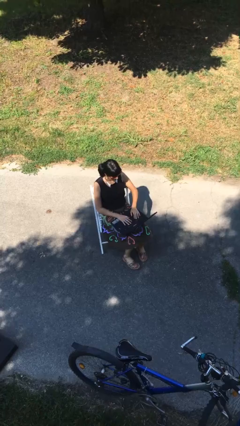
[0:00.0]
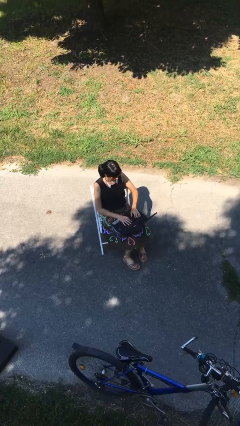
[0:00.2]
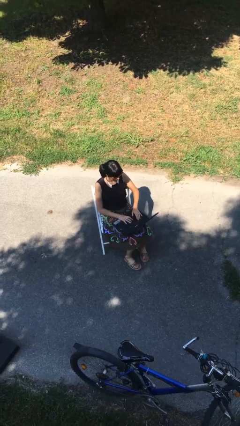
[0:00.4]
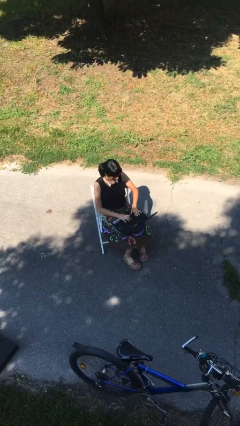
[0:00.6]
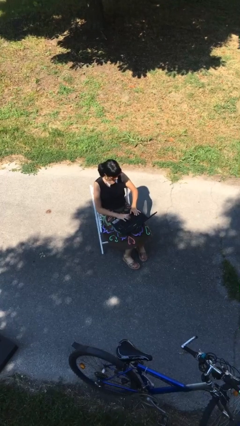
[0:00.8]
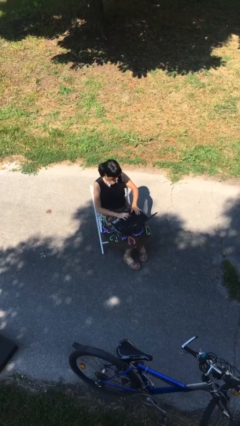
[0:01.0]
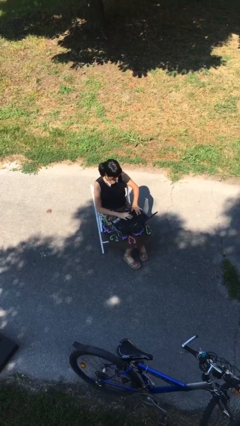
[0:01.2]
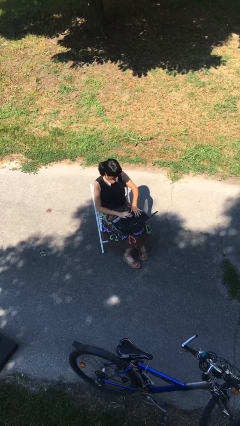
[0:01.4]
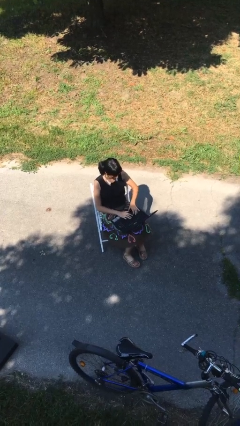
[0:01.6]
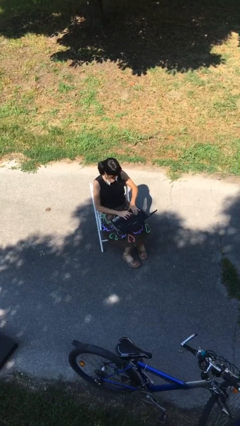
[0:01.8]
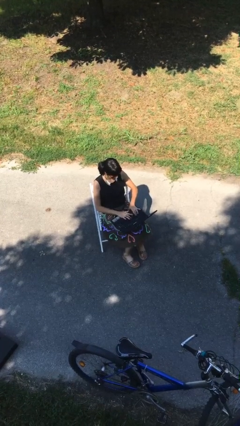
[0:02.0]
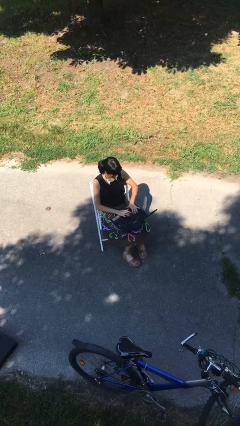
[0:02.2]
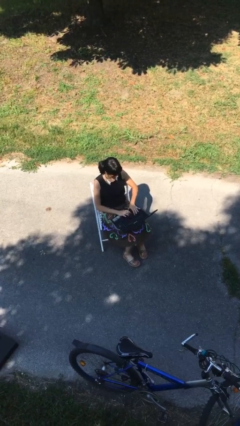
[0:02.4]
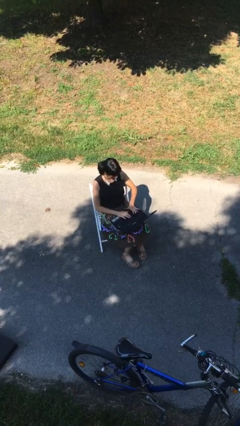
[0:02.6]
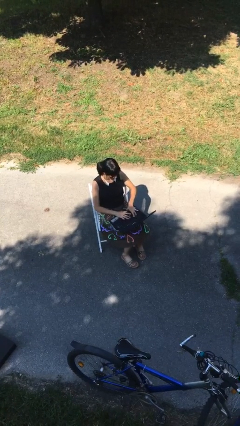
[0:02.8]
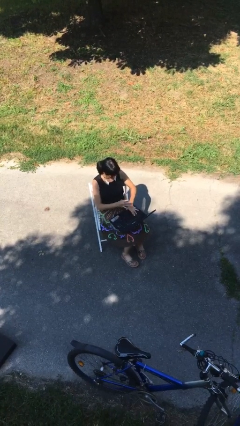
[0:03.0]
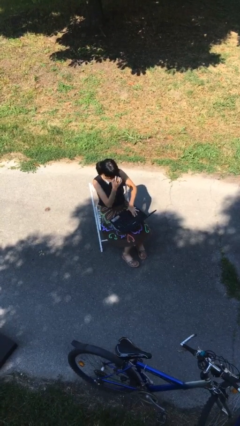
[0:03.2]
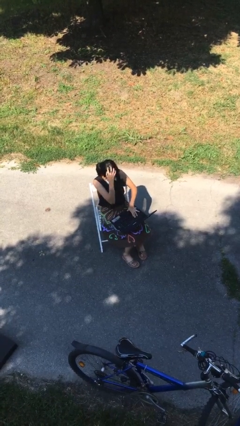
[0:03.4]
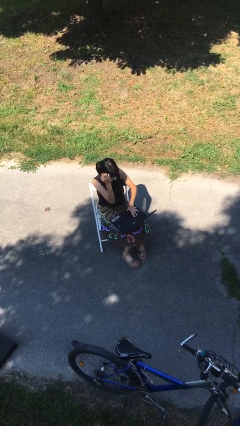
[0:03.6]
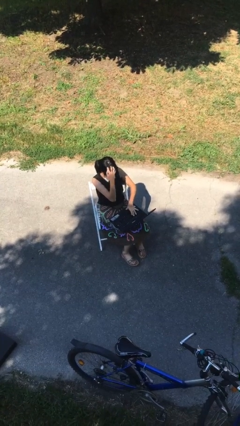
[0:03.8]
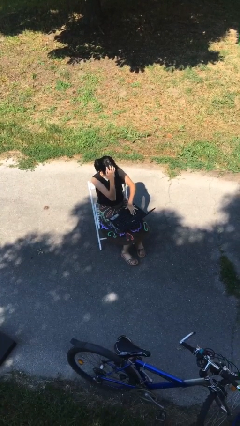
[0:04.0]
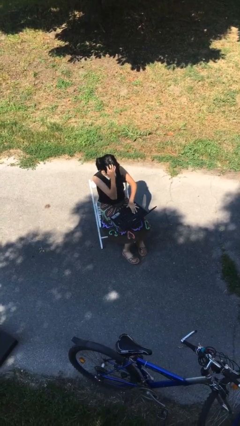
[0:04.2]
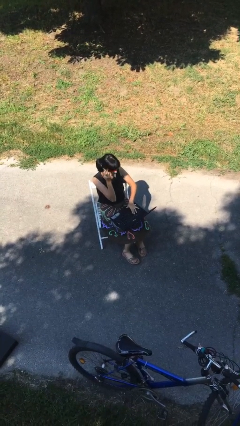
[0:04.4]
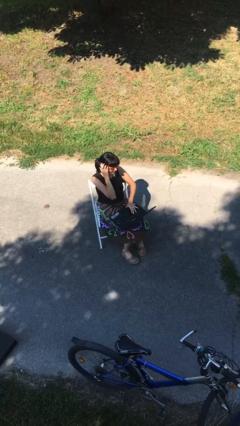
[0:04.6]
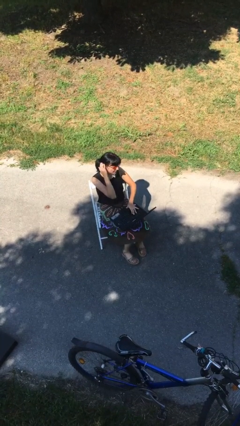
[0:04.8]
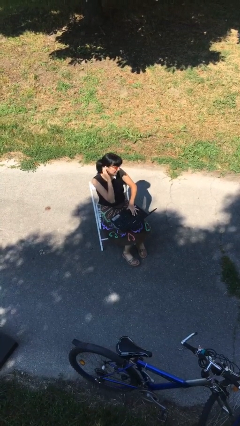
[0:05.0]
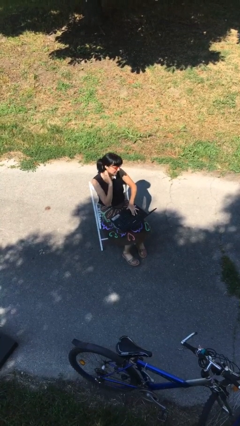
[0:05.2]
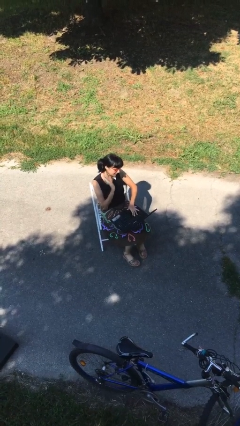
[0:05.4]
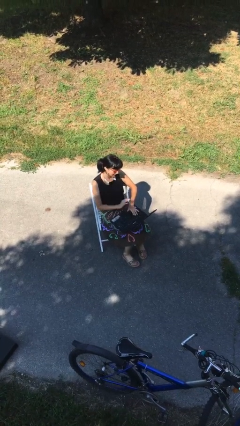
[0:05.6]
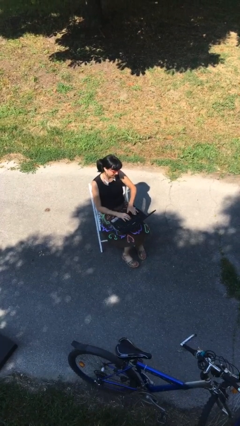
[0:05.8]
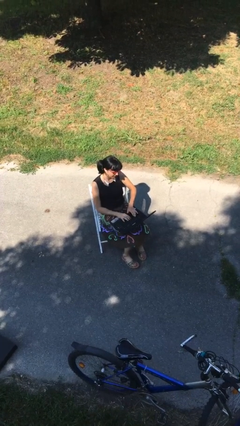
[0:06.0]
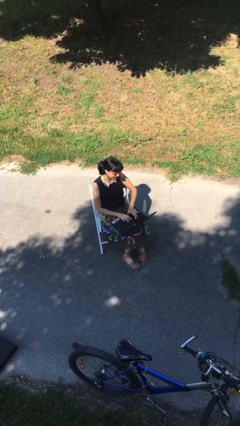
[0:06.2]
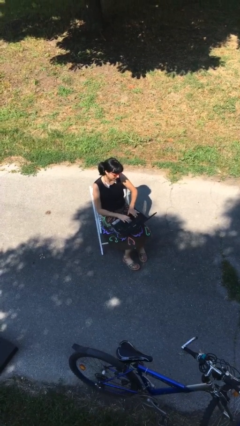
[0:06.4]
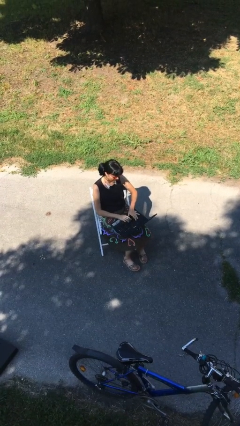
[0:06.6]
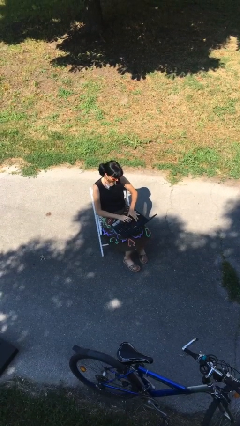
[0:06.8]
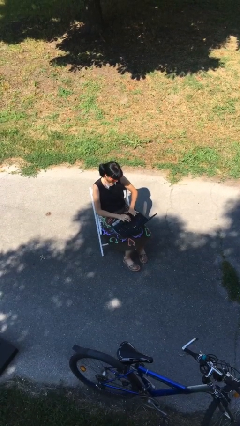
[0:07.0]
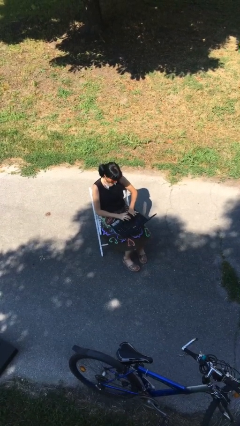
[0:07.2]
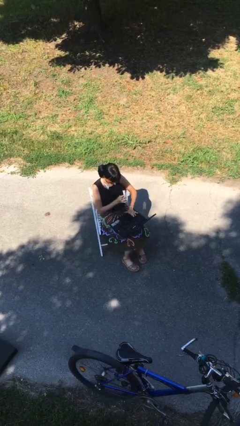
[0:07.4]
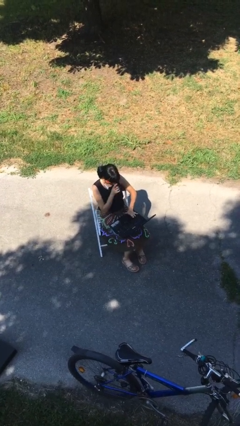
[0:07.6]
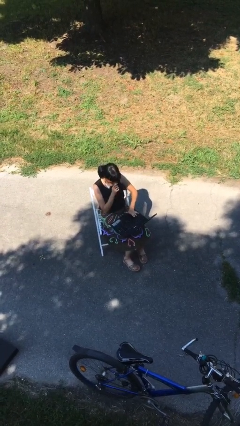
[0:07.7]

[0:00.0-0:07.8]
person interacts with laptop

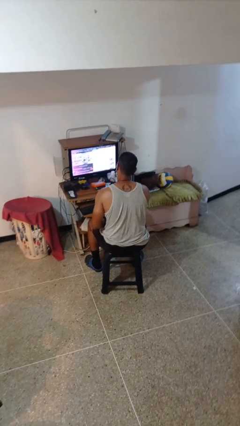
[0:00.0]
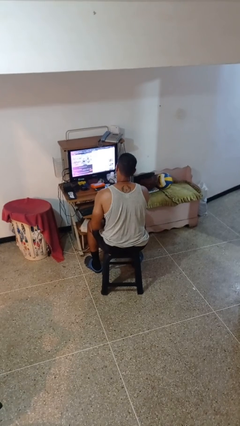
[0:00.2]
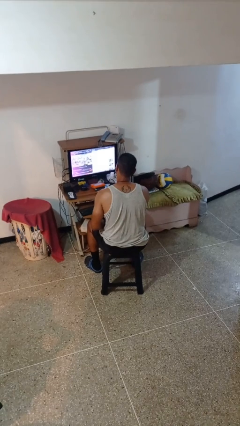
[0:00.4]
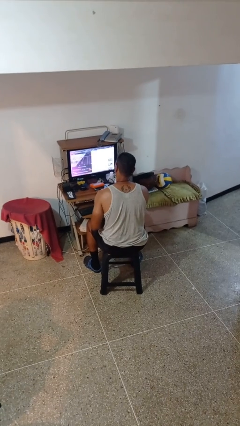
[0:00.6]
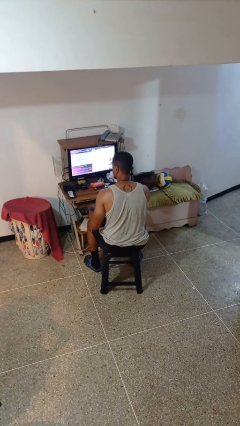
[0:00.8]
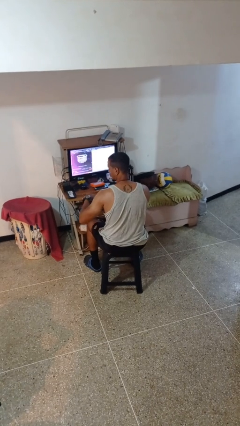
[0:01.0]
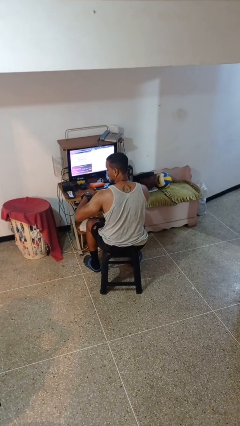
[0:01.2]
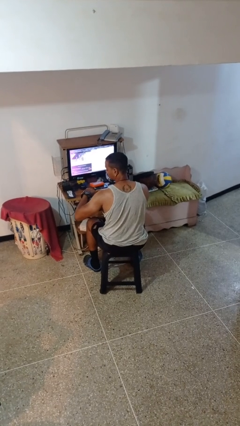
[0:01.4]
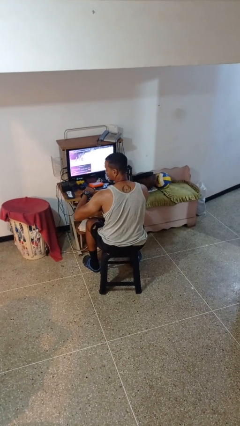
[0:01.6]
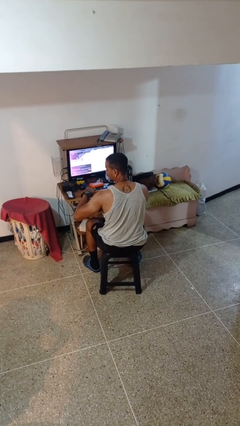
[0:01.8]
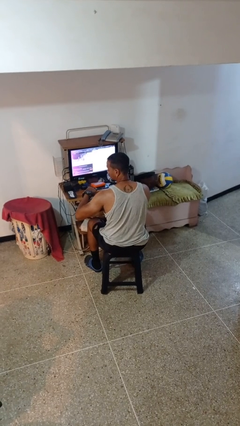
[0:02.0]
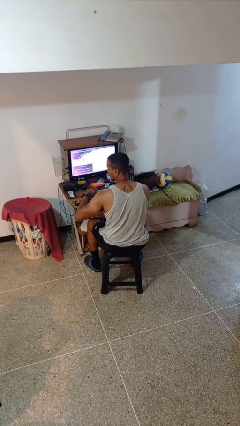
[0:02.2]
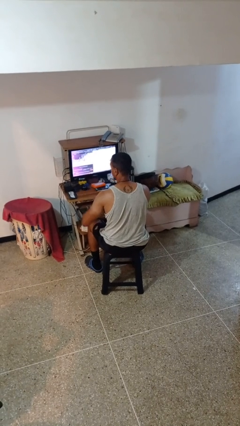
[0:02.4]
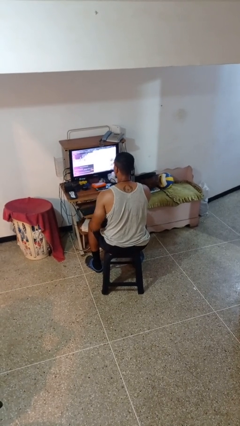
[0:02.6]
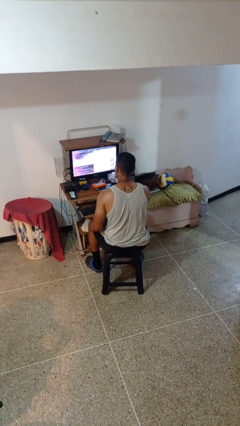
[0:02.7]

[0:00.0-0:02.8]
person looks at wristwatch

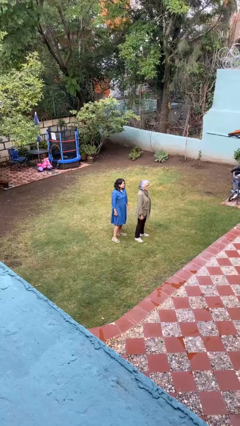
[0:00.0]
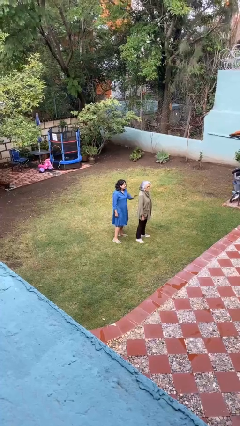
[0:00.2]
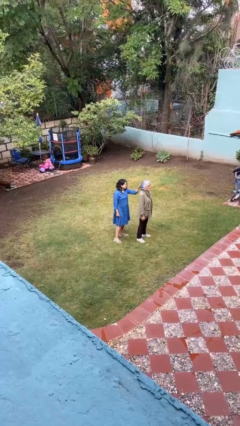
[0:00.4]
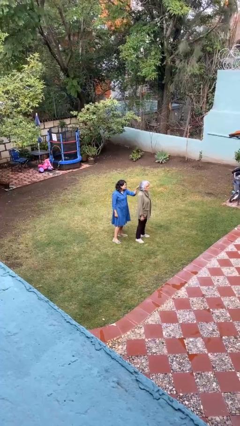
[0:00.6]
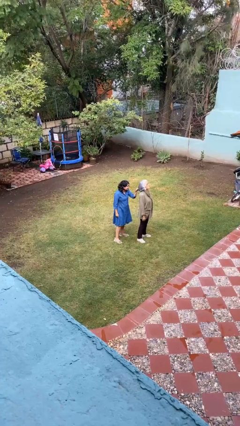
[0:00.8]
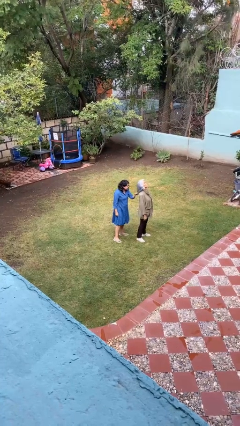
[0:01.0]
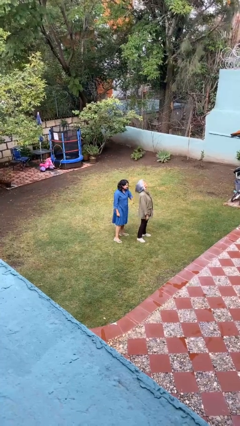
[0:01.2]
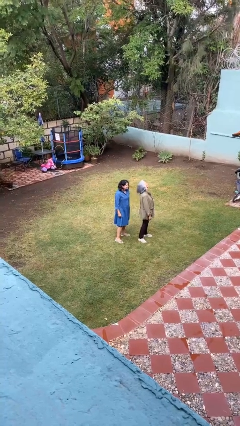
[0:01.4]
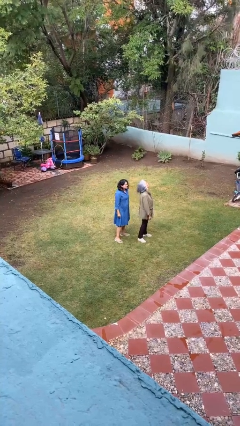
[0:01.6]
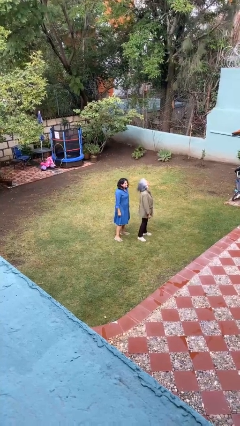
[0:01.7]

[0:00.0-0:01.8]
person grabs person by hair

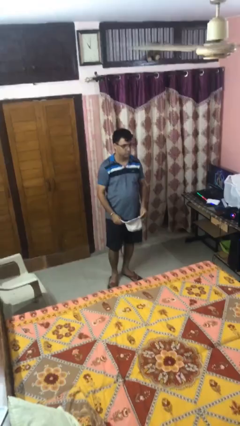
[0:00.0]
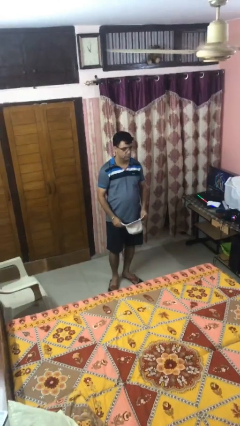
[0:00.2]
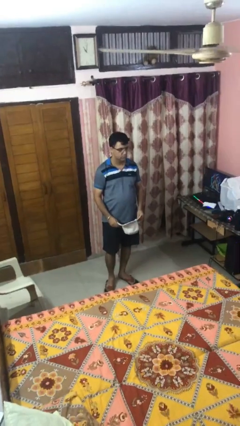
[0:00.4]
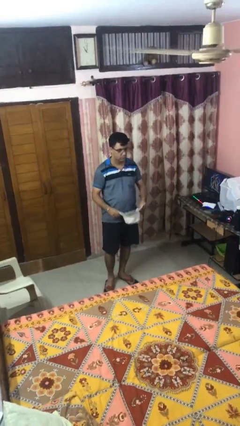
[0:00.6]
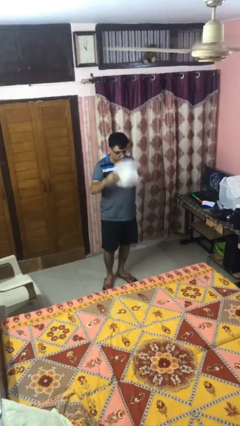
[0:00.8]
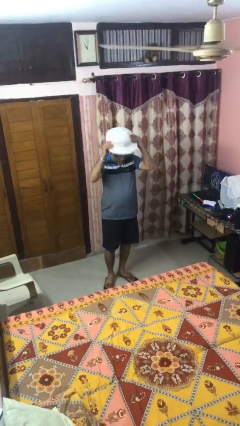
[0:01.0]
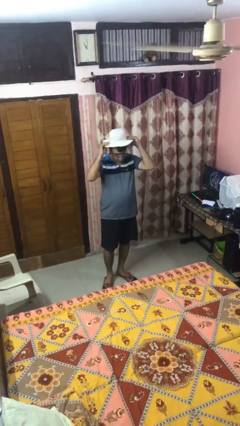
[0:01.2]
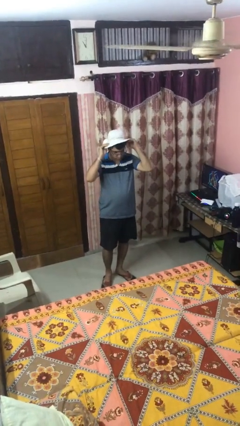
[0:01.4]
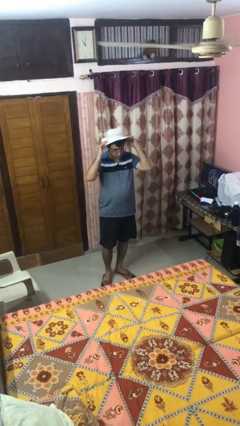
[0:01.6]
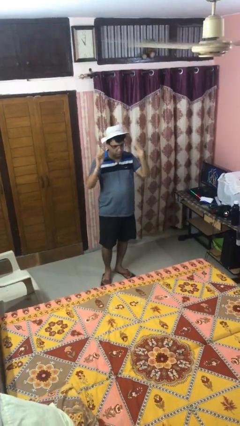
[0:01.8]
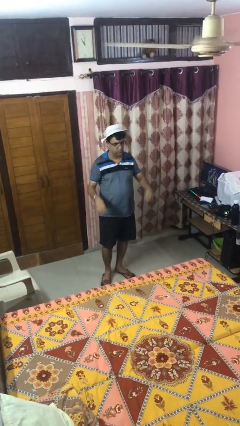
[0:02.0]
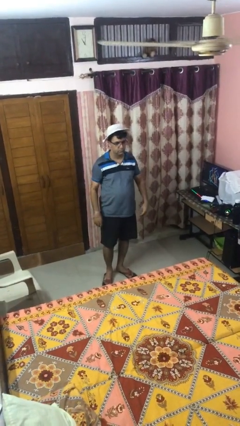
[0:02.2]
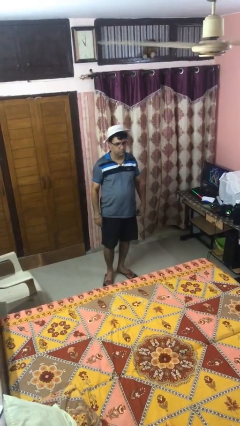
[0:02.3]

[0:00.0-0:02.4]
person puts on hat

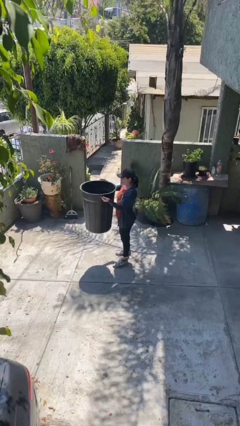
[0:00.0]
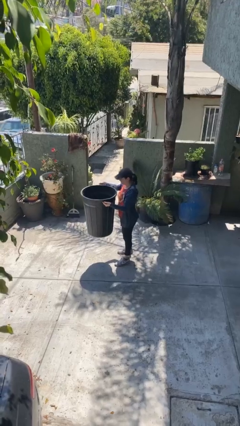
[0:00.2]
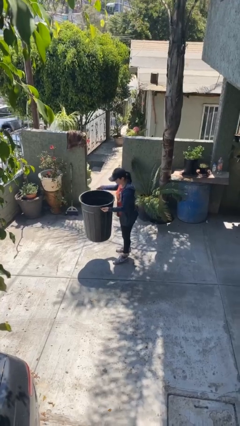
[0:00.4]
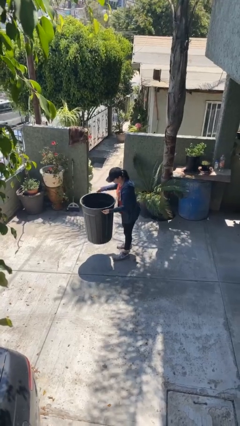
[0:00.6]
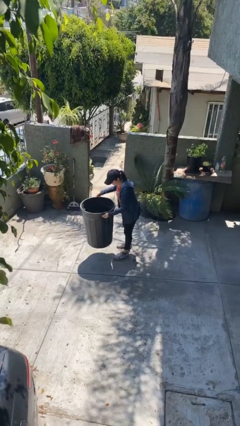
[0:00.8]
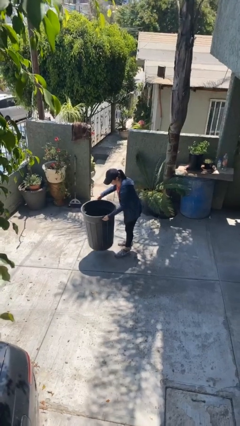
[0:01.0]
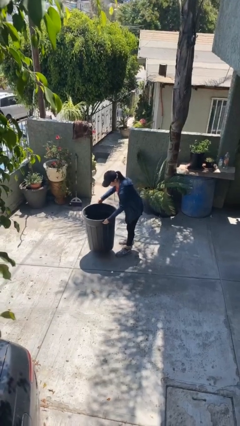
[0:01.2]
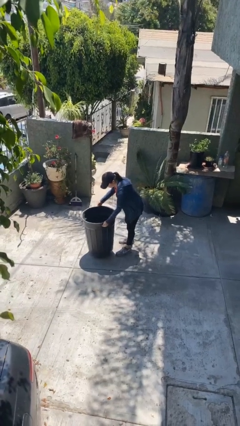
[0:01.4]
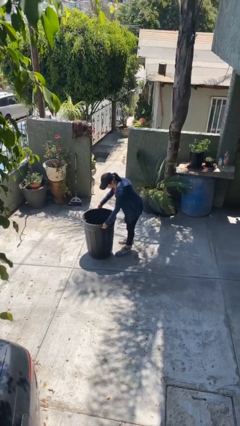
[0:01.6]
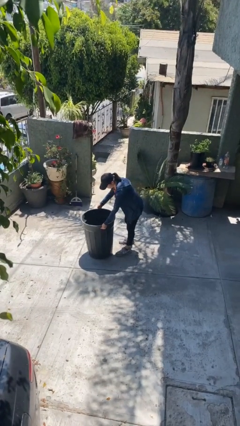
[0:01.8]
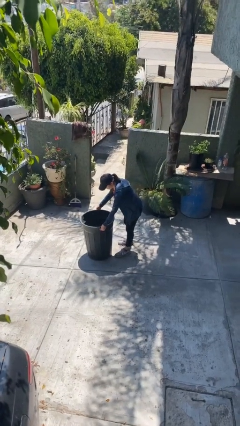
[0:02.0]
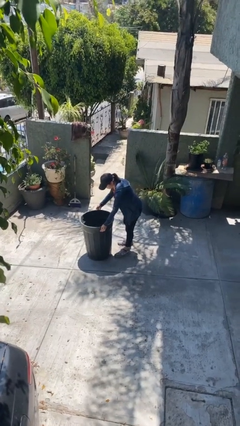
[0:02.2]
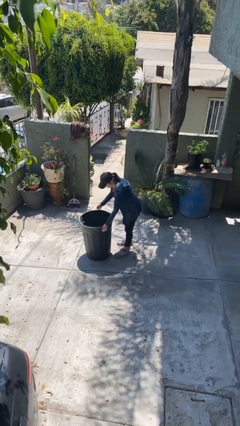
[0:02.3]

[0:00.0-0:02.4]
person puts down object on floor

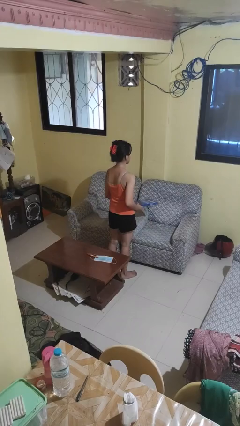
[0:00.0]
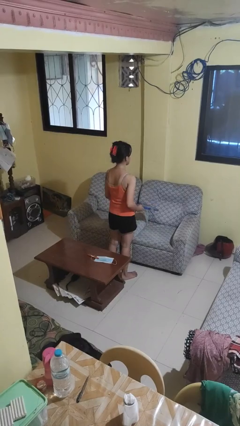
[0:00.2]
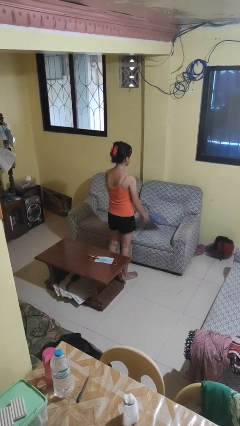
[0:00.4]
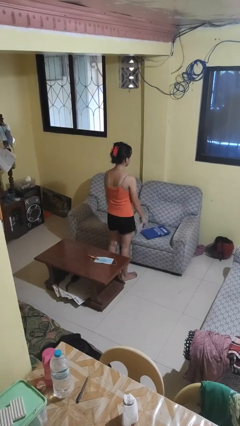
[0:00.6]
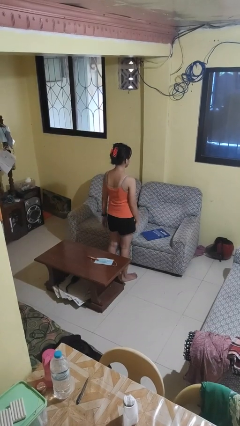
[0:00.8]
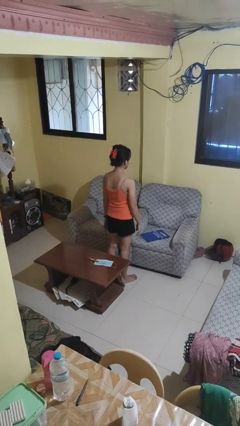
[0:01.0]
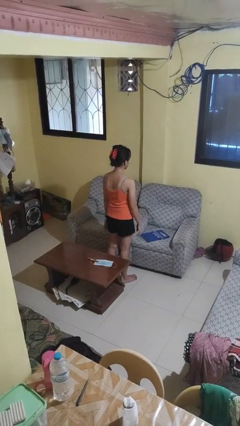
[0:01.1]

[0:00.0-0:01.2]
person puts down object on couch
